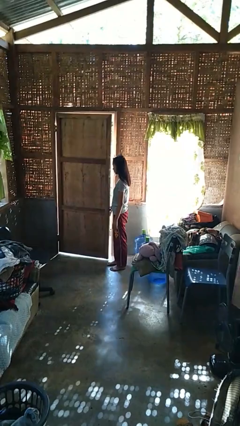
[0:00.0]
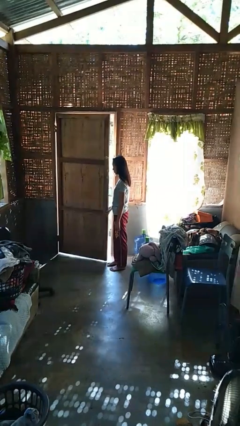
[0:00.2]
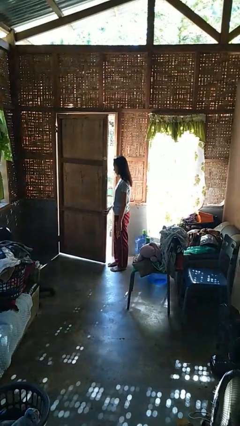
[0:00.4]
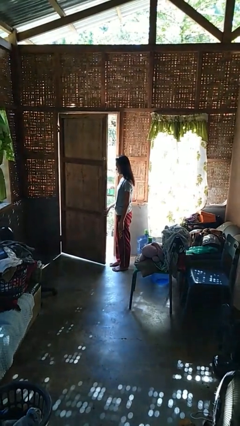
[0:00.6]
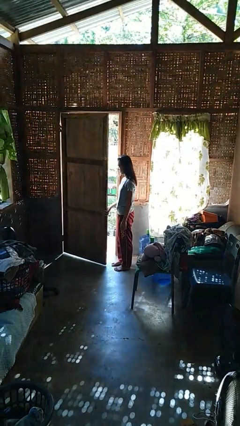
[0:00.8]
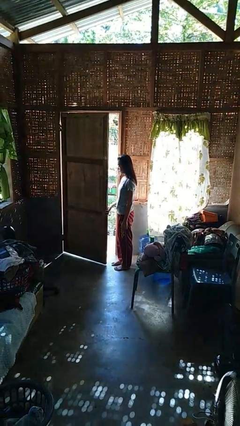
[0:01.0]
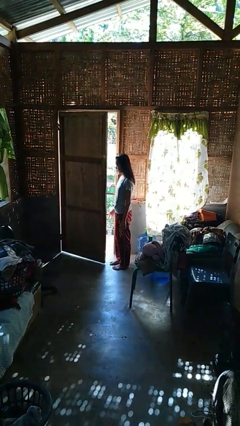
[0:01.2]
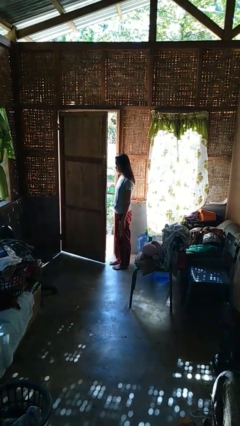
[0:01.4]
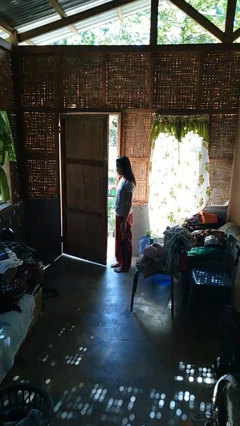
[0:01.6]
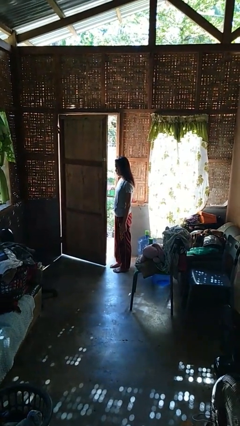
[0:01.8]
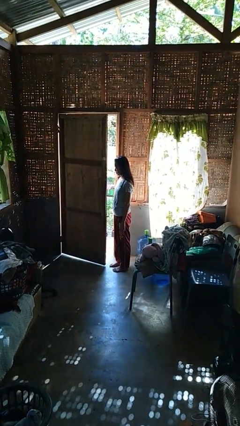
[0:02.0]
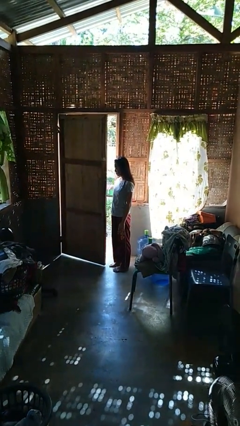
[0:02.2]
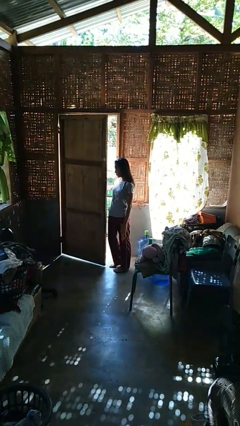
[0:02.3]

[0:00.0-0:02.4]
person opens facility door

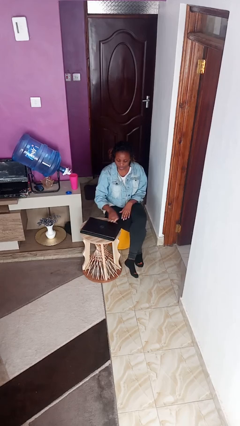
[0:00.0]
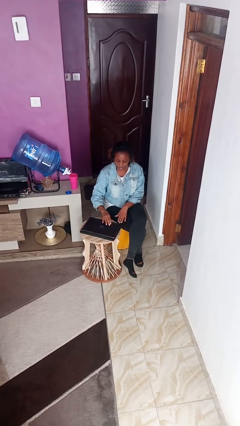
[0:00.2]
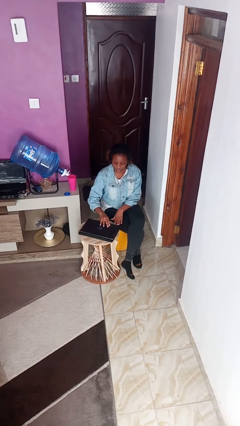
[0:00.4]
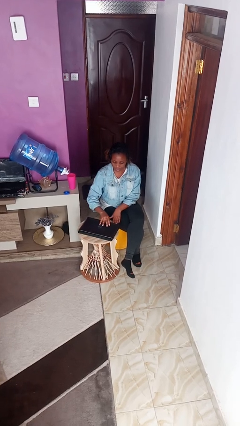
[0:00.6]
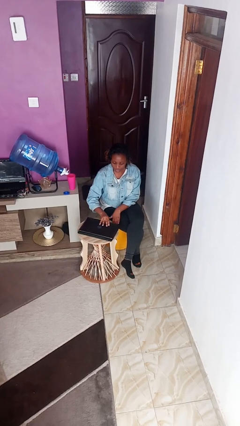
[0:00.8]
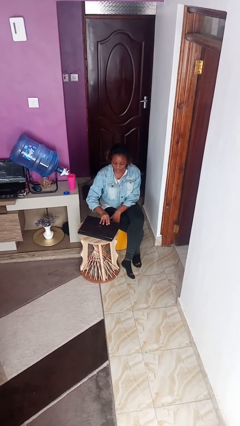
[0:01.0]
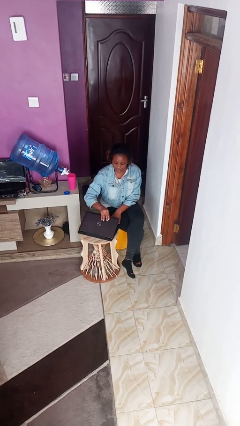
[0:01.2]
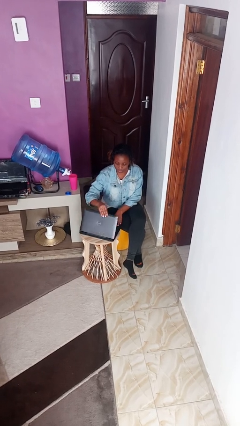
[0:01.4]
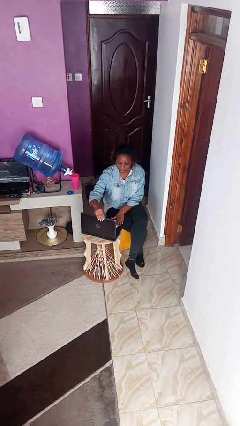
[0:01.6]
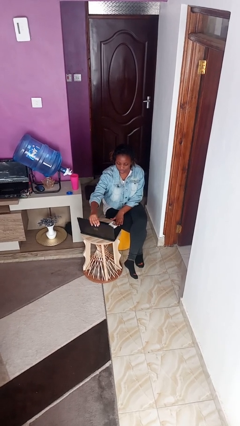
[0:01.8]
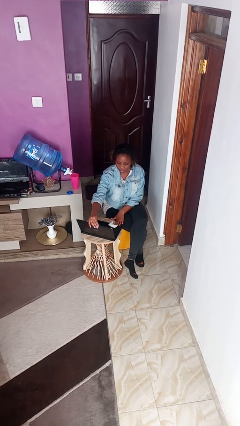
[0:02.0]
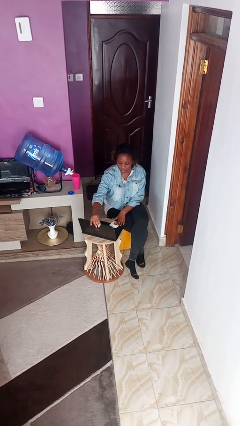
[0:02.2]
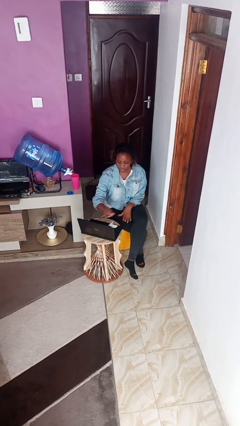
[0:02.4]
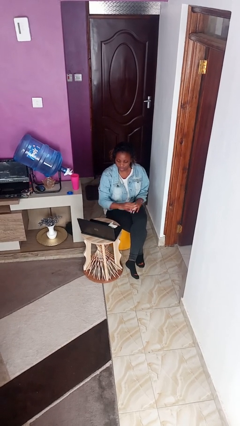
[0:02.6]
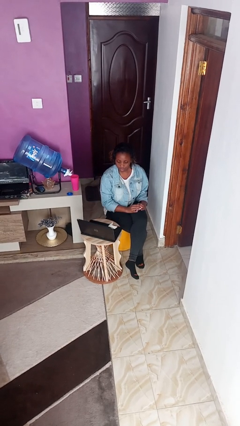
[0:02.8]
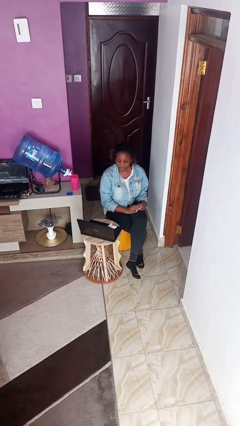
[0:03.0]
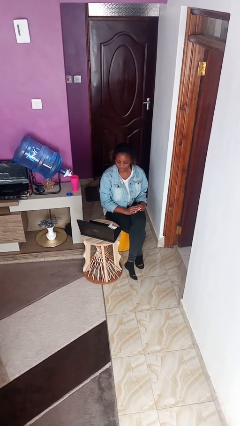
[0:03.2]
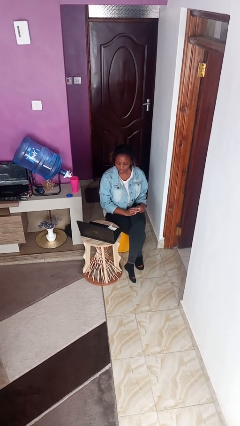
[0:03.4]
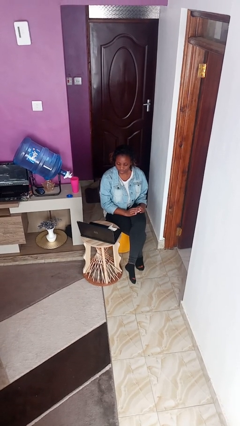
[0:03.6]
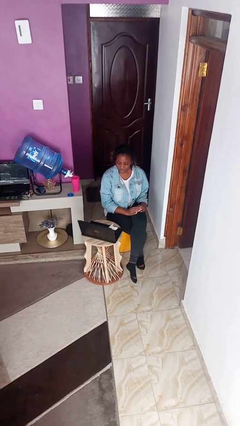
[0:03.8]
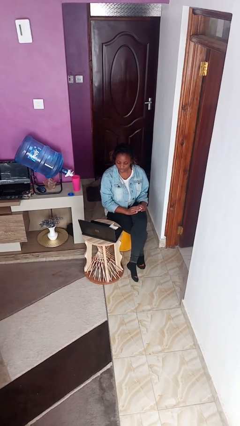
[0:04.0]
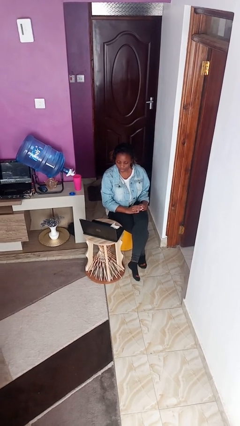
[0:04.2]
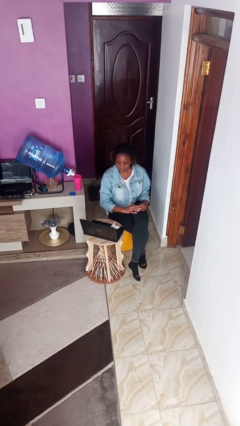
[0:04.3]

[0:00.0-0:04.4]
person opens laptop

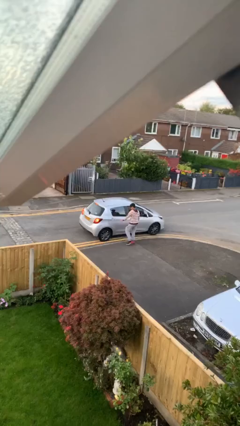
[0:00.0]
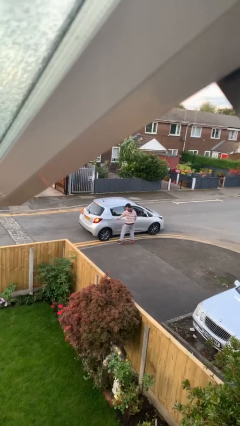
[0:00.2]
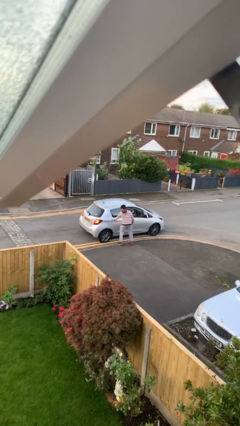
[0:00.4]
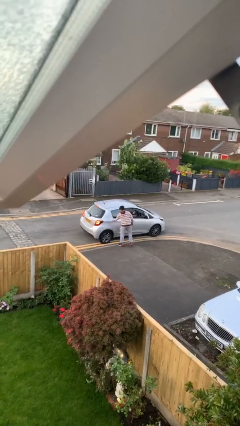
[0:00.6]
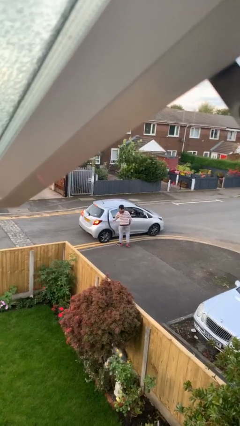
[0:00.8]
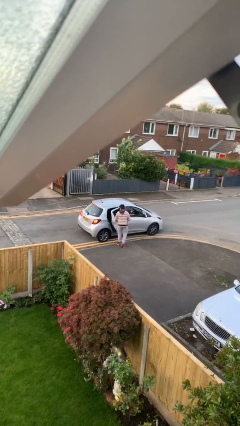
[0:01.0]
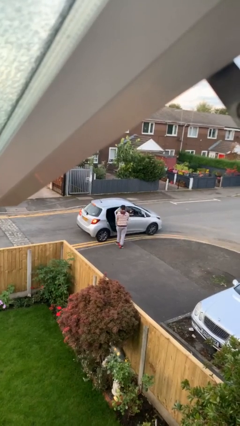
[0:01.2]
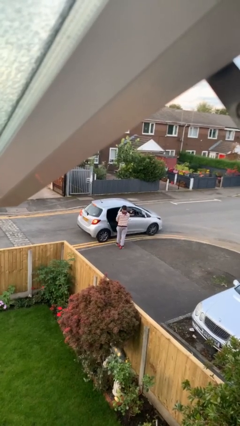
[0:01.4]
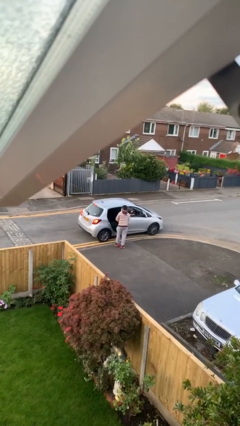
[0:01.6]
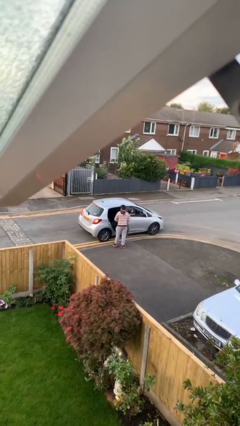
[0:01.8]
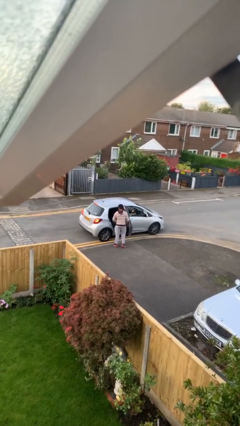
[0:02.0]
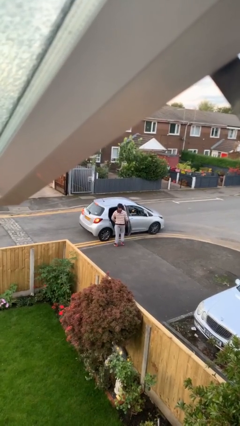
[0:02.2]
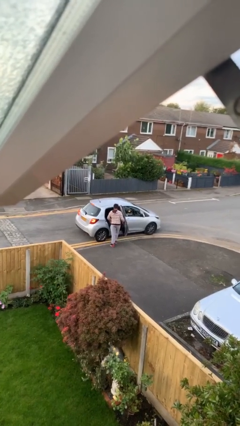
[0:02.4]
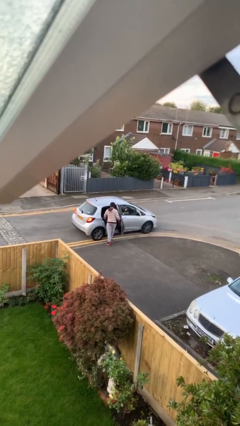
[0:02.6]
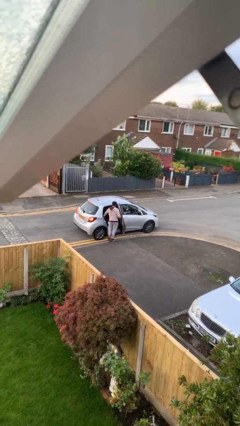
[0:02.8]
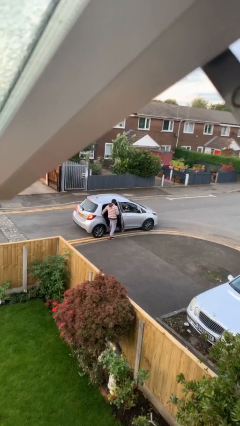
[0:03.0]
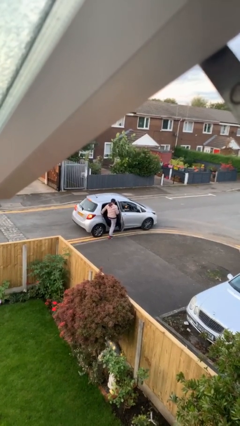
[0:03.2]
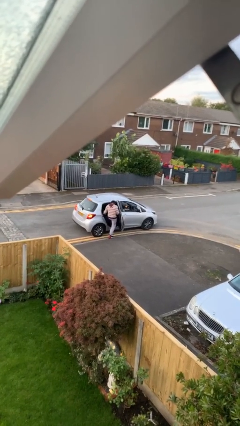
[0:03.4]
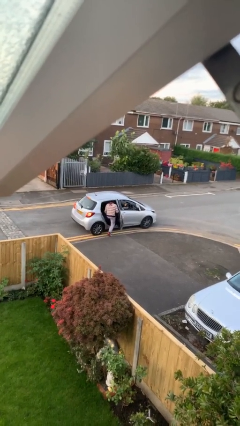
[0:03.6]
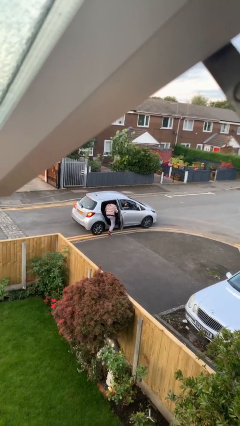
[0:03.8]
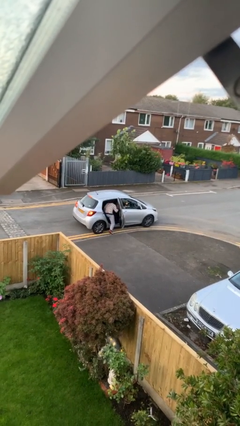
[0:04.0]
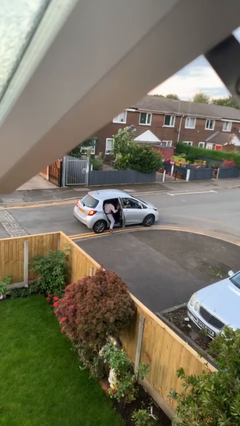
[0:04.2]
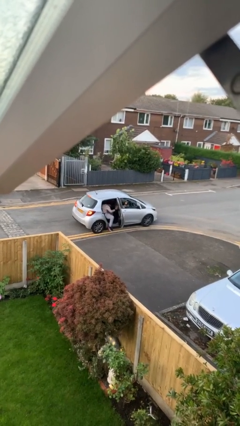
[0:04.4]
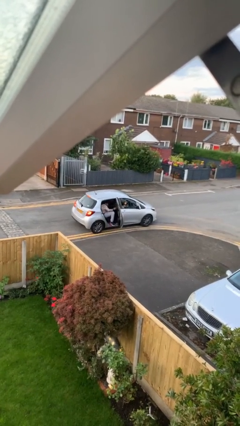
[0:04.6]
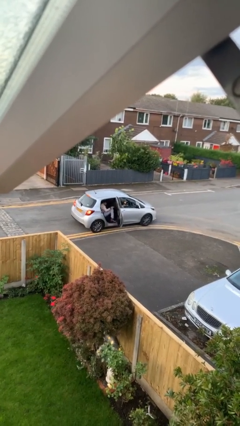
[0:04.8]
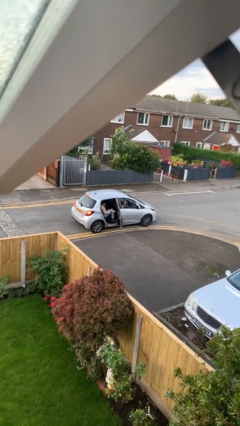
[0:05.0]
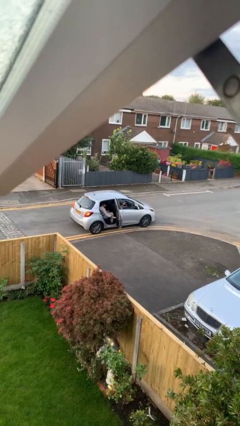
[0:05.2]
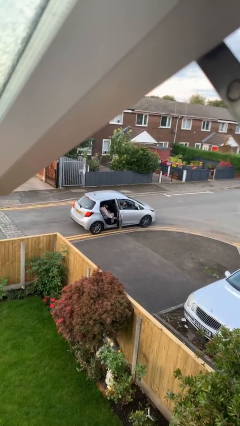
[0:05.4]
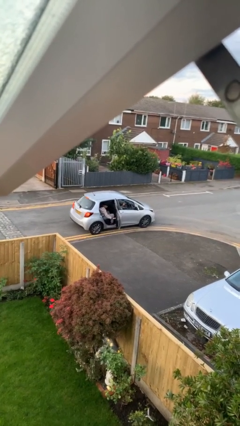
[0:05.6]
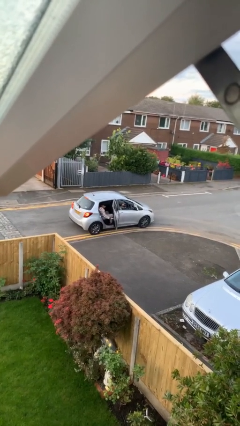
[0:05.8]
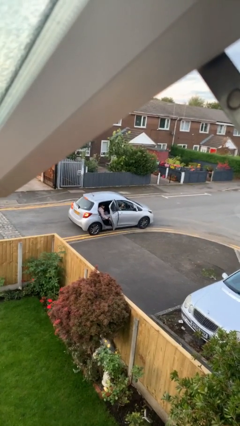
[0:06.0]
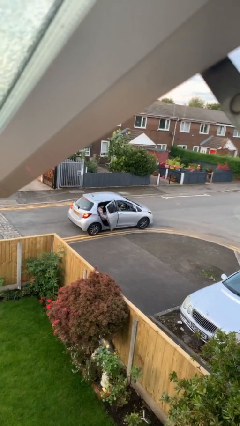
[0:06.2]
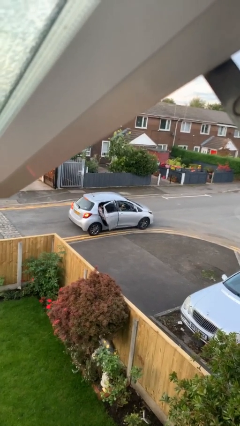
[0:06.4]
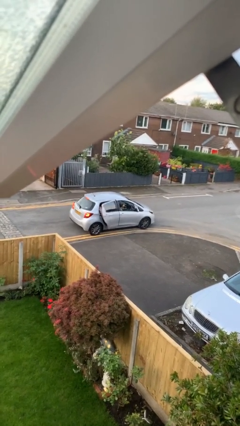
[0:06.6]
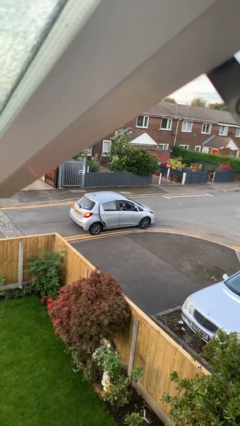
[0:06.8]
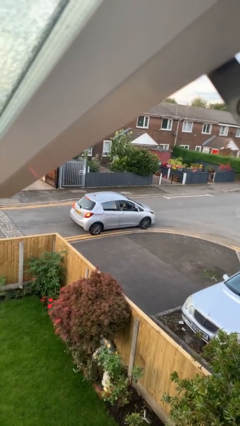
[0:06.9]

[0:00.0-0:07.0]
car picks up person

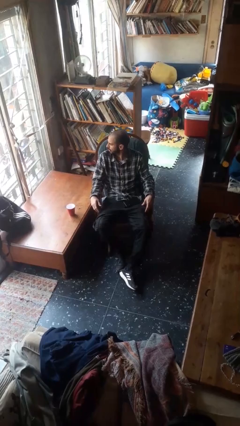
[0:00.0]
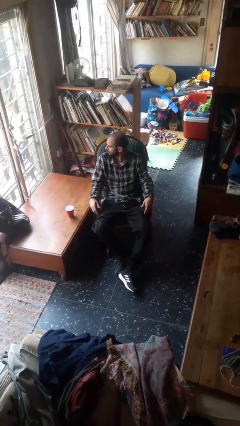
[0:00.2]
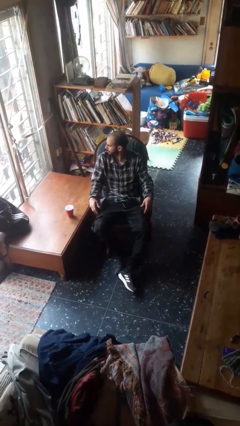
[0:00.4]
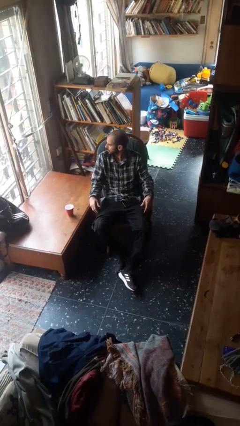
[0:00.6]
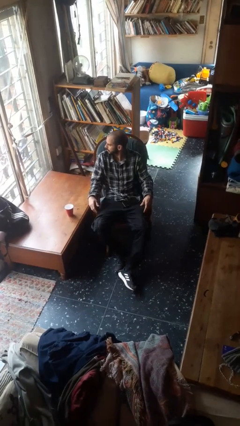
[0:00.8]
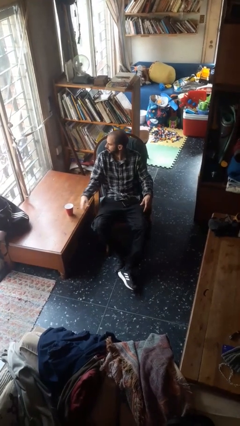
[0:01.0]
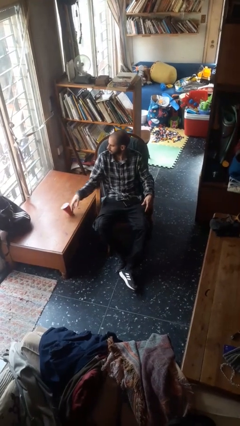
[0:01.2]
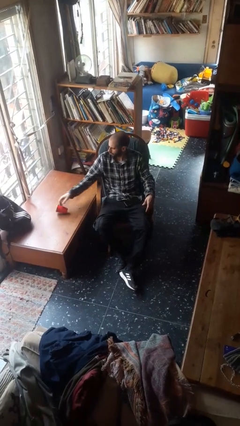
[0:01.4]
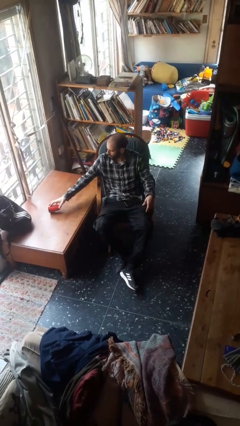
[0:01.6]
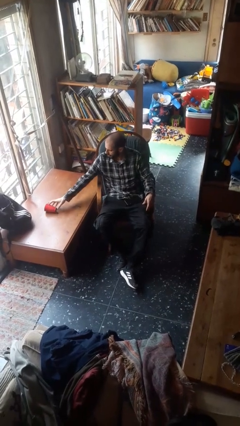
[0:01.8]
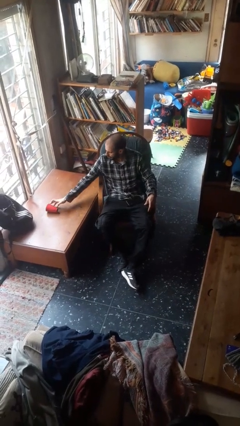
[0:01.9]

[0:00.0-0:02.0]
person knocks over glass

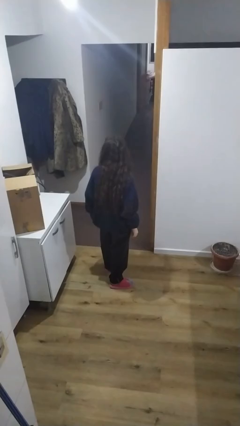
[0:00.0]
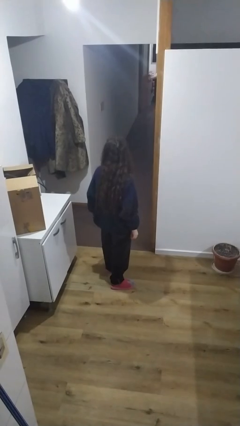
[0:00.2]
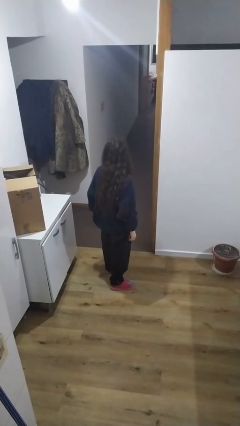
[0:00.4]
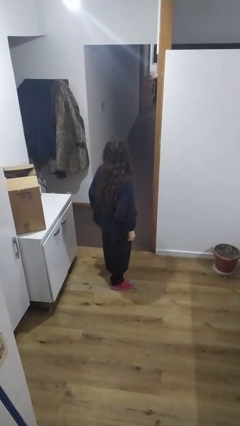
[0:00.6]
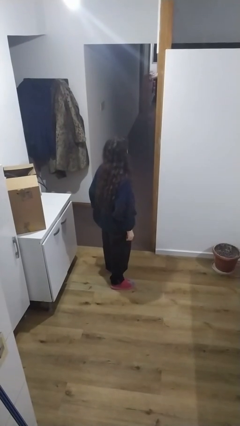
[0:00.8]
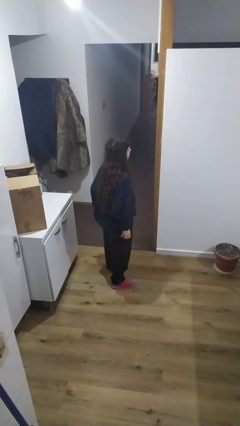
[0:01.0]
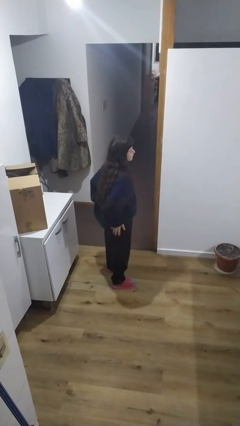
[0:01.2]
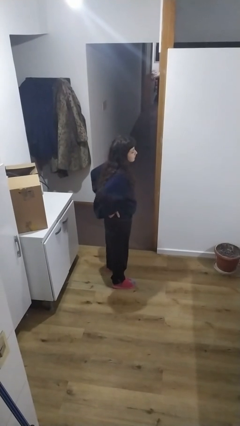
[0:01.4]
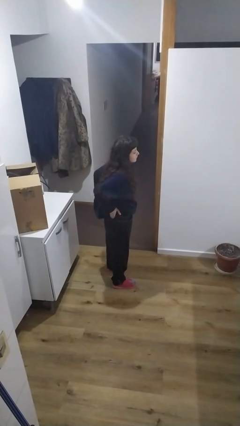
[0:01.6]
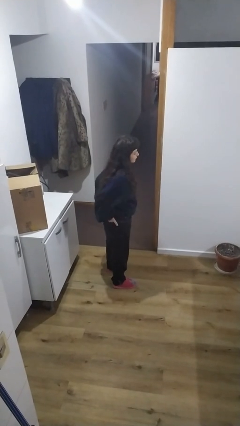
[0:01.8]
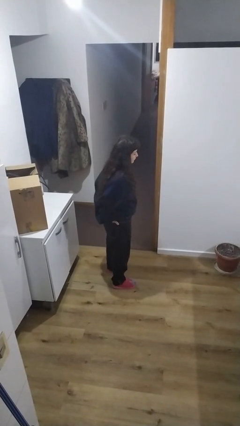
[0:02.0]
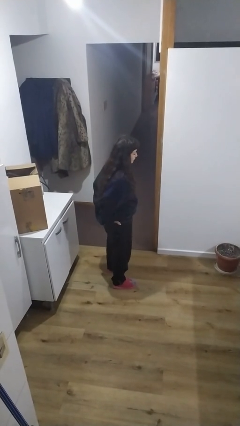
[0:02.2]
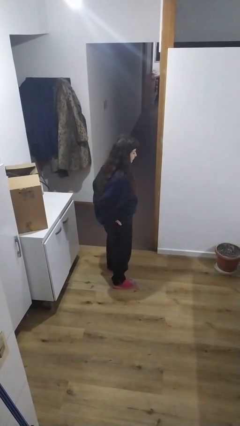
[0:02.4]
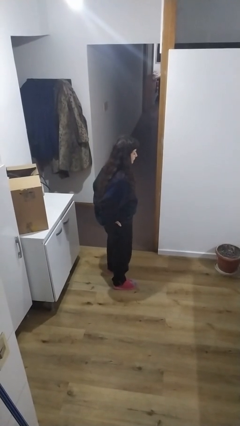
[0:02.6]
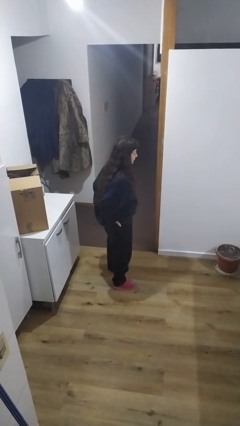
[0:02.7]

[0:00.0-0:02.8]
person puts hands in back pockets
